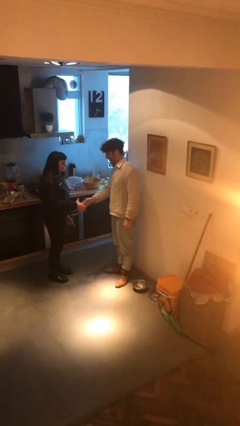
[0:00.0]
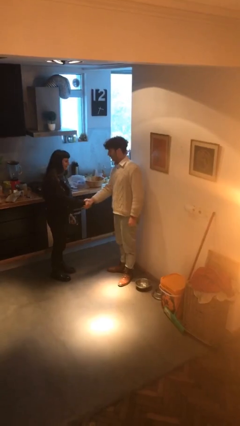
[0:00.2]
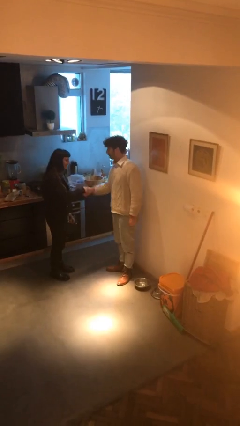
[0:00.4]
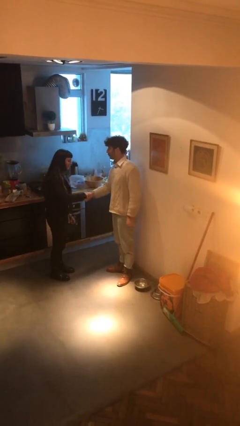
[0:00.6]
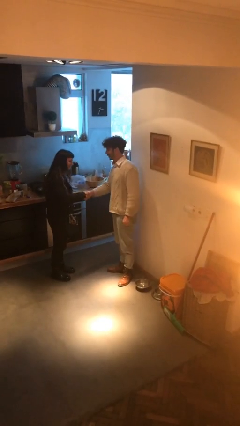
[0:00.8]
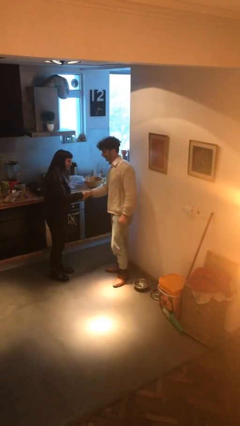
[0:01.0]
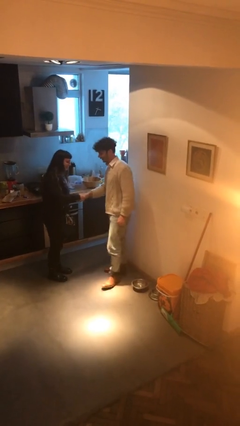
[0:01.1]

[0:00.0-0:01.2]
person shakes hand

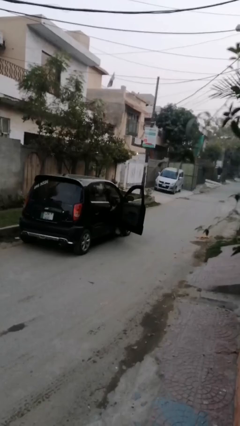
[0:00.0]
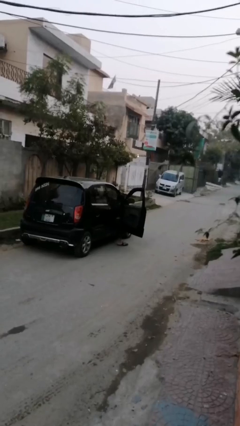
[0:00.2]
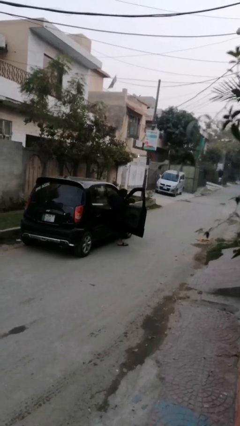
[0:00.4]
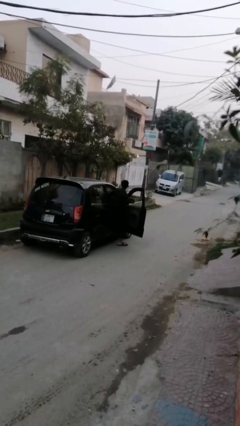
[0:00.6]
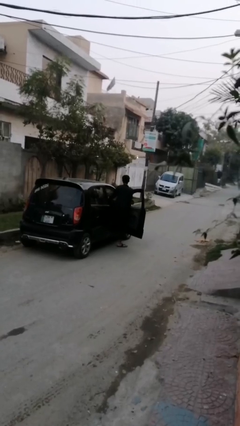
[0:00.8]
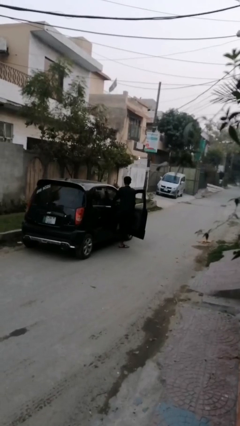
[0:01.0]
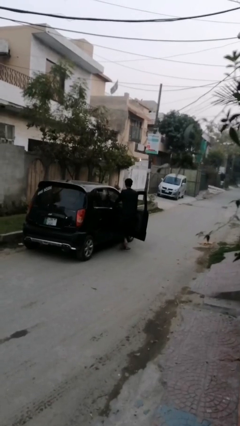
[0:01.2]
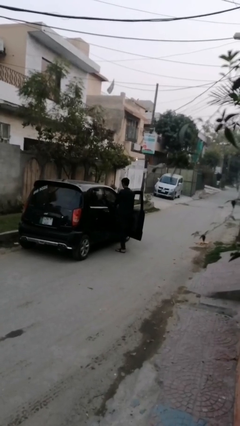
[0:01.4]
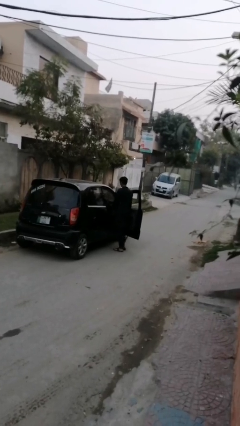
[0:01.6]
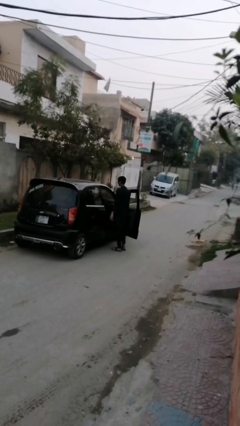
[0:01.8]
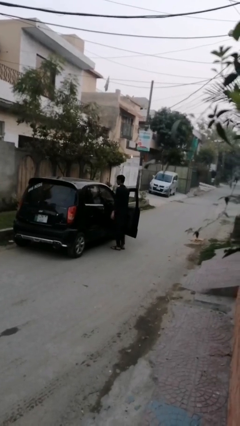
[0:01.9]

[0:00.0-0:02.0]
person exits car

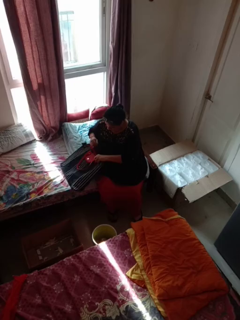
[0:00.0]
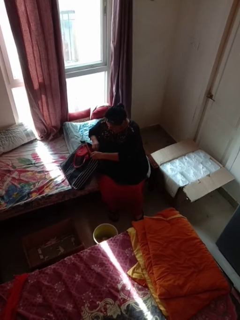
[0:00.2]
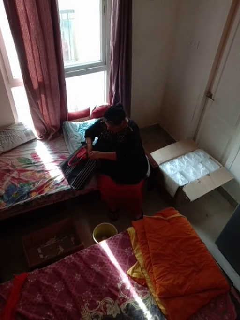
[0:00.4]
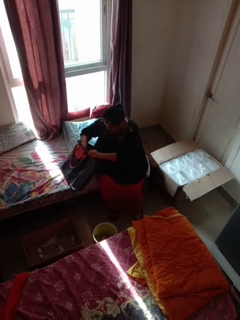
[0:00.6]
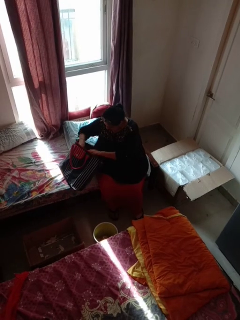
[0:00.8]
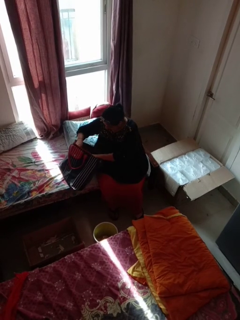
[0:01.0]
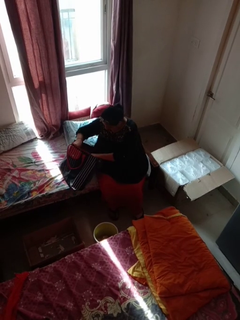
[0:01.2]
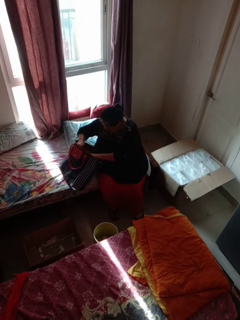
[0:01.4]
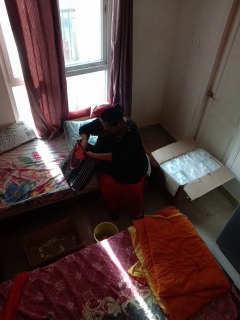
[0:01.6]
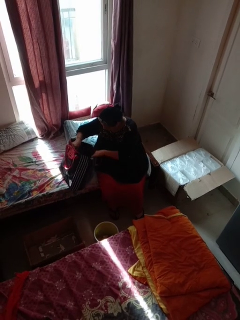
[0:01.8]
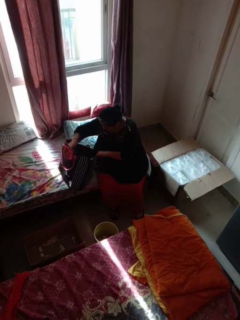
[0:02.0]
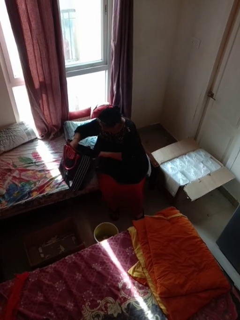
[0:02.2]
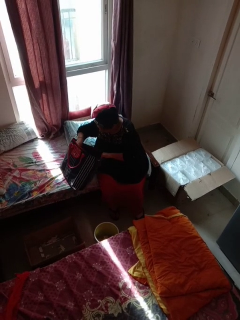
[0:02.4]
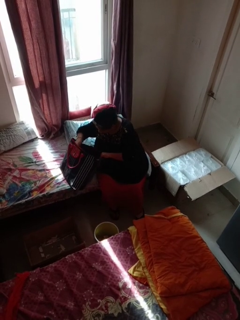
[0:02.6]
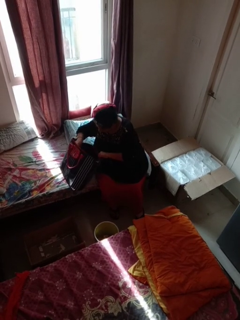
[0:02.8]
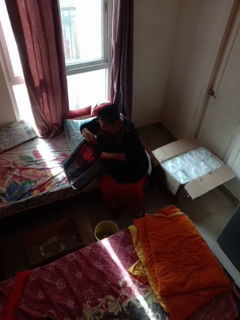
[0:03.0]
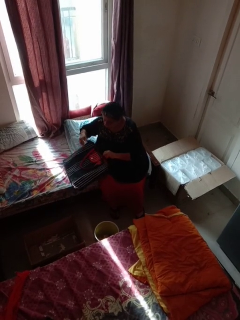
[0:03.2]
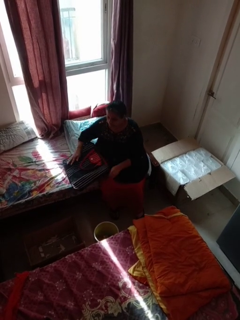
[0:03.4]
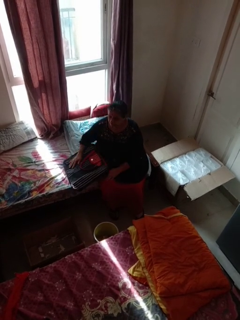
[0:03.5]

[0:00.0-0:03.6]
person searches in bag

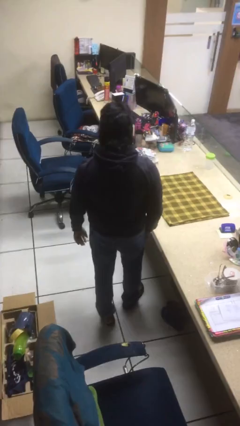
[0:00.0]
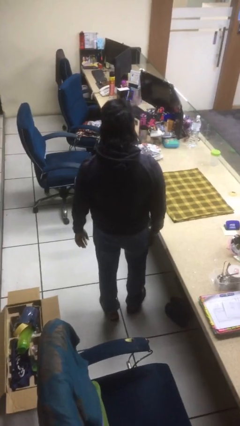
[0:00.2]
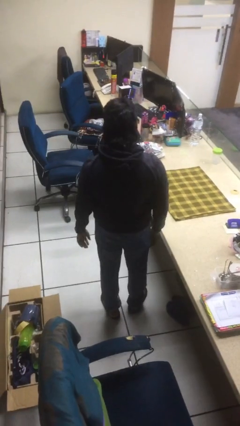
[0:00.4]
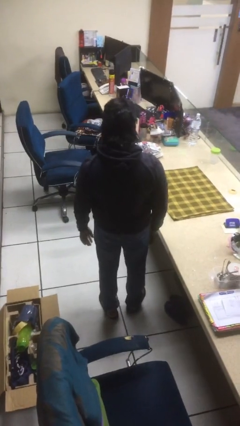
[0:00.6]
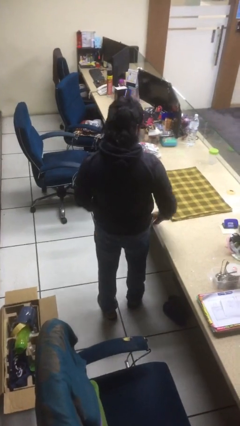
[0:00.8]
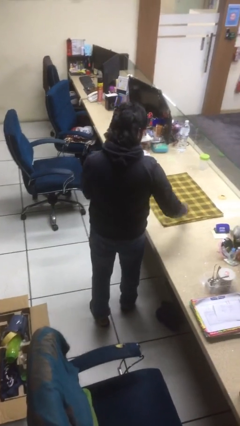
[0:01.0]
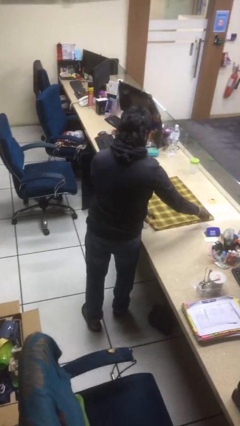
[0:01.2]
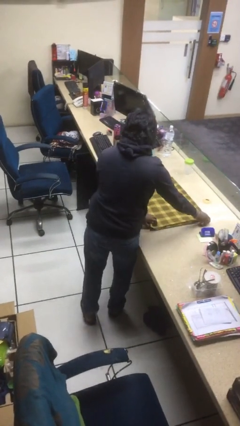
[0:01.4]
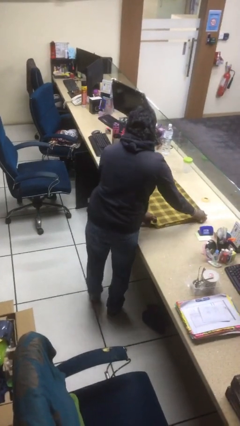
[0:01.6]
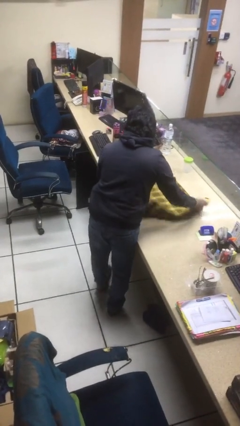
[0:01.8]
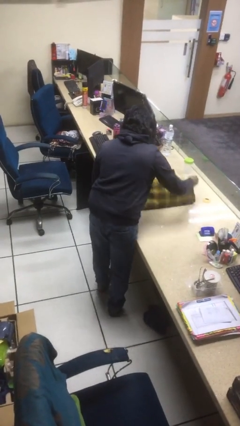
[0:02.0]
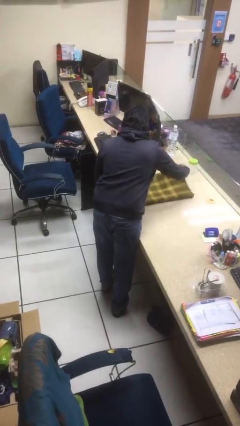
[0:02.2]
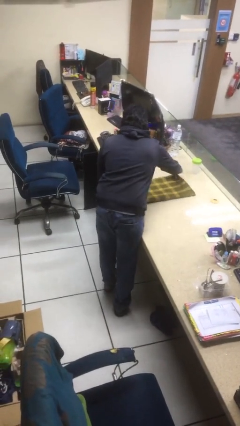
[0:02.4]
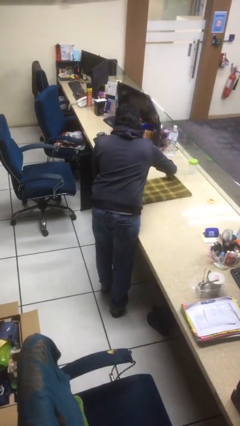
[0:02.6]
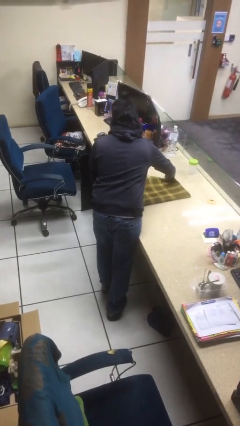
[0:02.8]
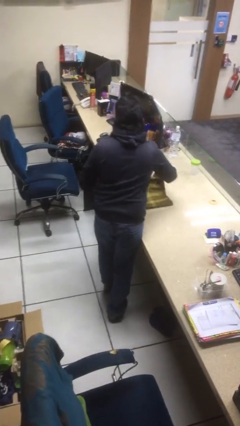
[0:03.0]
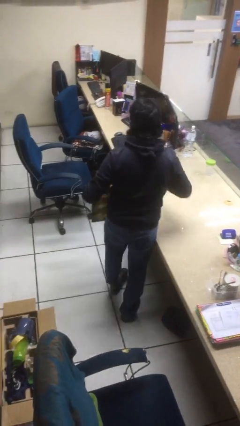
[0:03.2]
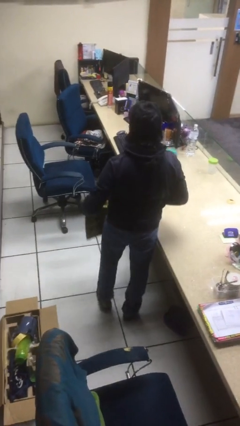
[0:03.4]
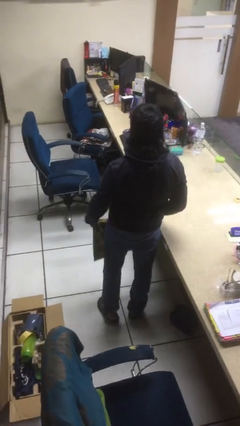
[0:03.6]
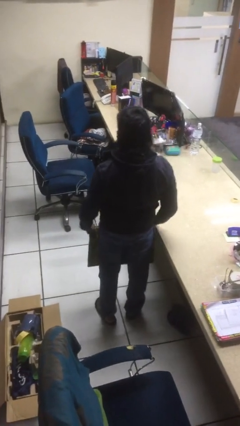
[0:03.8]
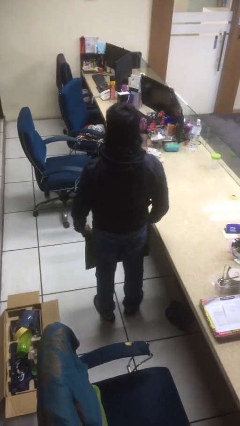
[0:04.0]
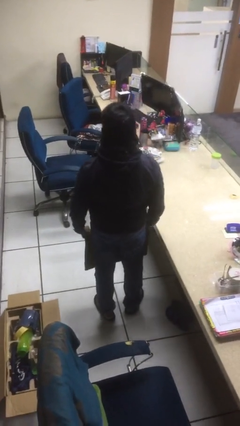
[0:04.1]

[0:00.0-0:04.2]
person folds tablecloth

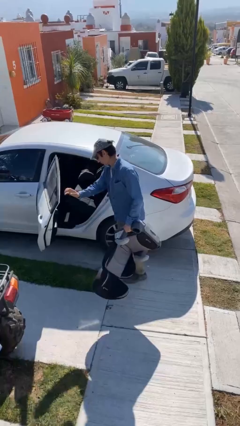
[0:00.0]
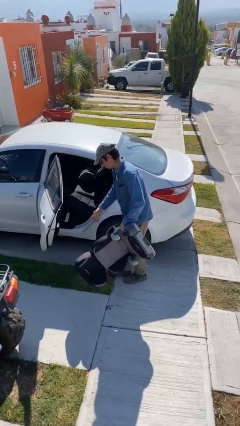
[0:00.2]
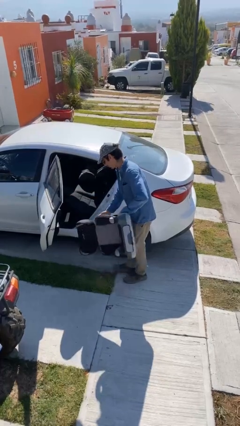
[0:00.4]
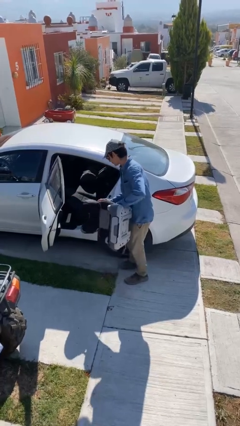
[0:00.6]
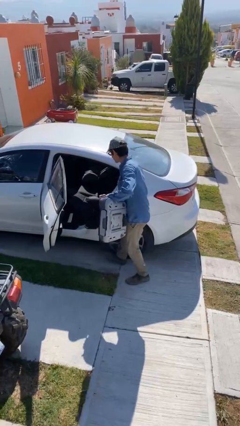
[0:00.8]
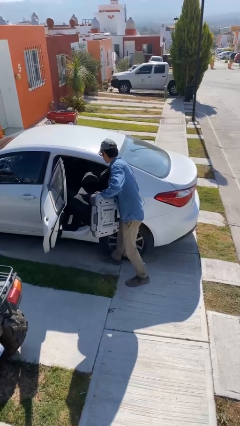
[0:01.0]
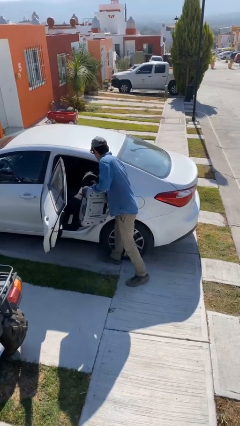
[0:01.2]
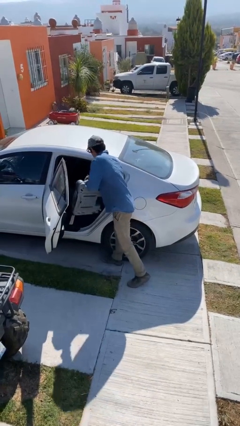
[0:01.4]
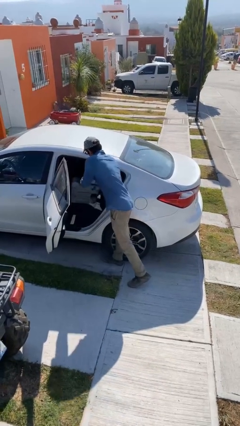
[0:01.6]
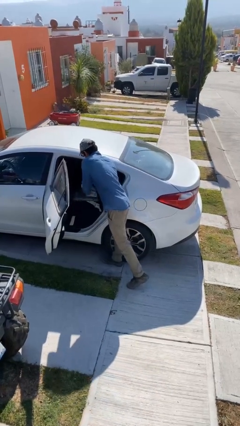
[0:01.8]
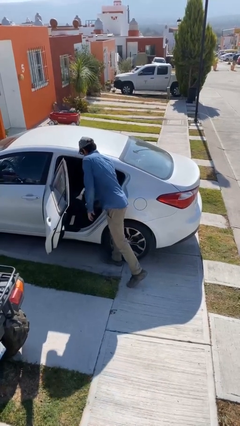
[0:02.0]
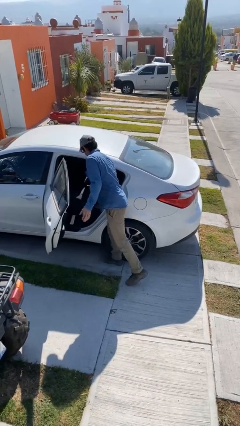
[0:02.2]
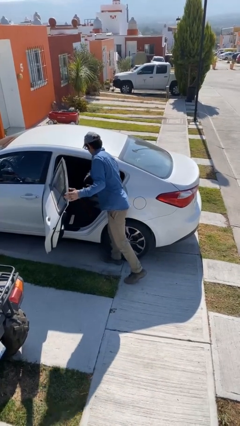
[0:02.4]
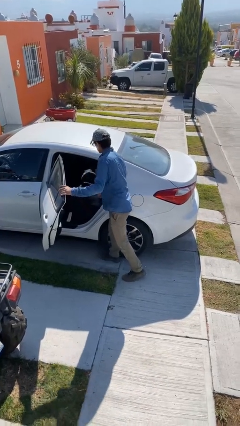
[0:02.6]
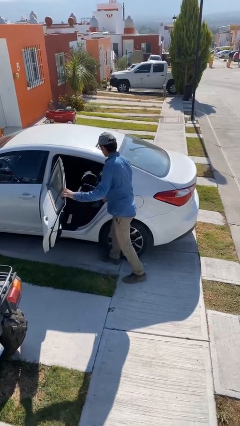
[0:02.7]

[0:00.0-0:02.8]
person loads car

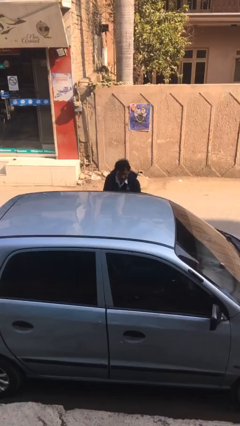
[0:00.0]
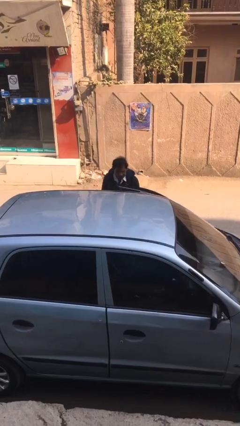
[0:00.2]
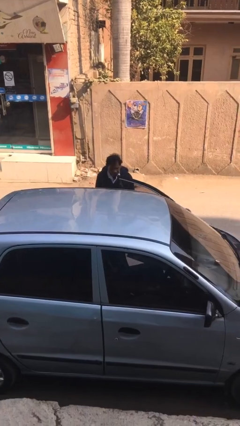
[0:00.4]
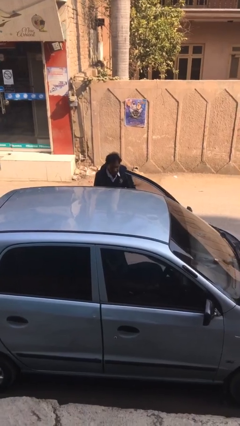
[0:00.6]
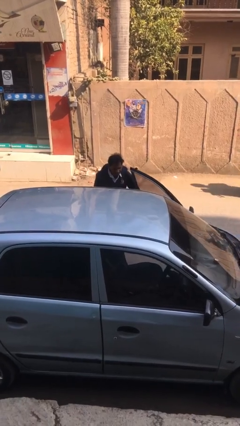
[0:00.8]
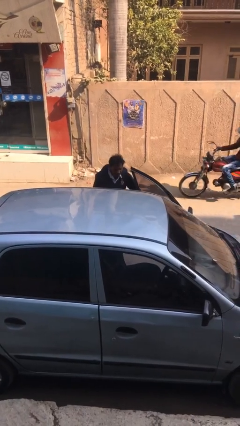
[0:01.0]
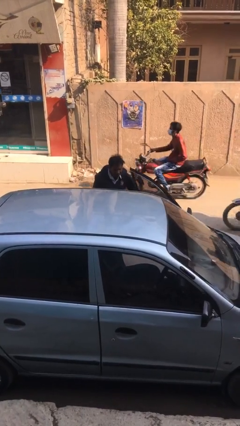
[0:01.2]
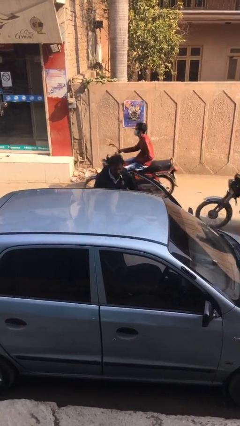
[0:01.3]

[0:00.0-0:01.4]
person opens car door

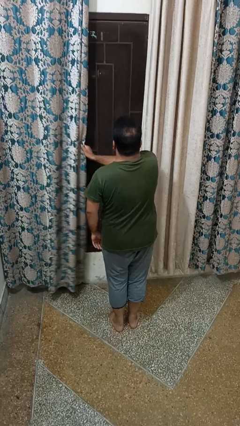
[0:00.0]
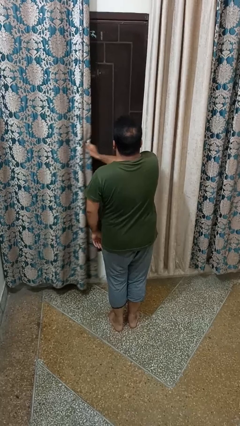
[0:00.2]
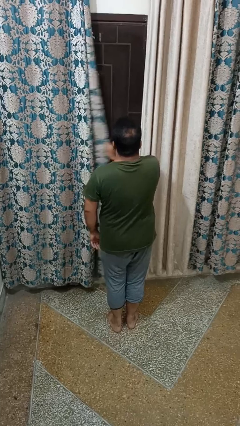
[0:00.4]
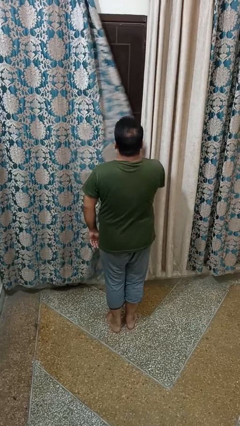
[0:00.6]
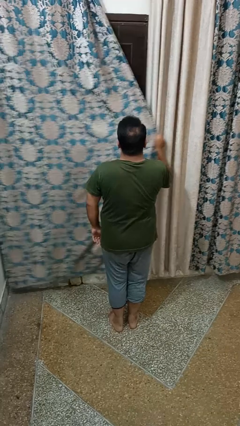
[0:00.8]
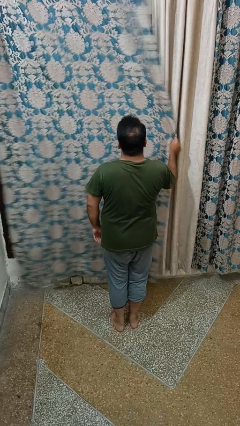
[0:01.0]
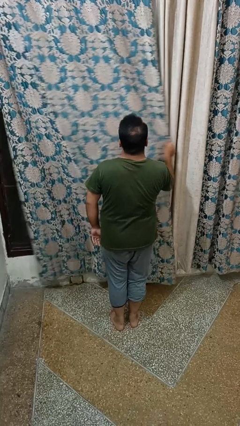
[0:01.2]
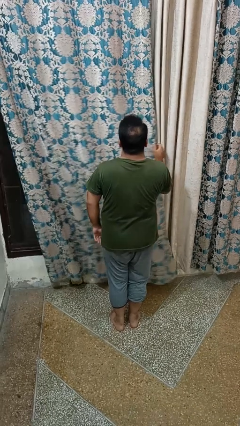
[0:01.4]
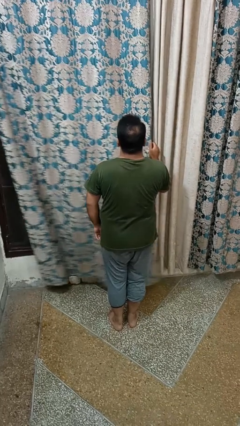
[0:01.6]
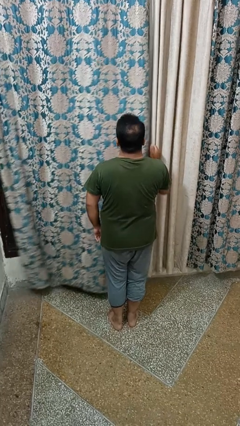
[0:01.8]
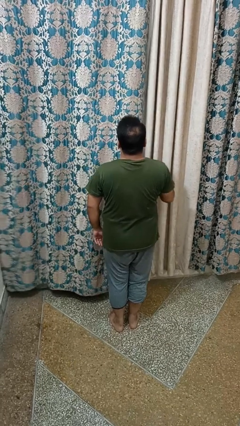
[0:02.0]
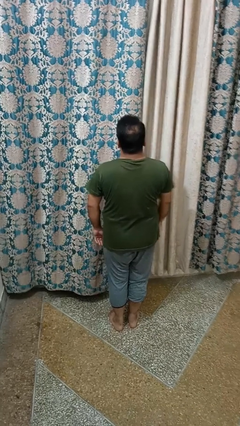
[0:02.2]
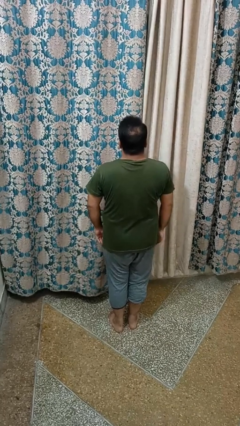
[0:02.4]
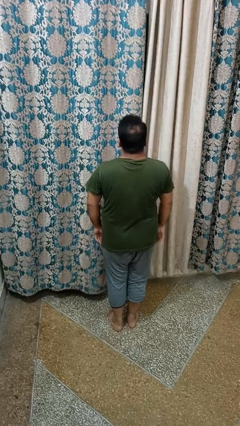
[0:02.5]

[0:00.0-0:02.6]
person closes curtains
